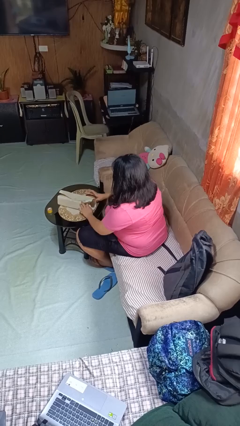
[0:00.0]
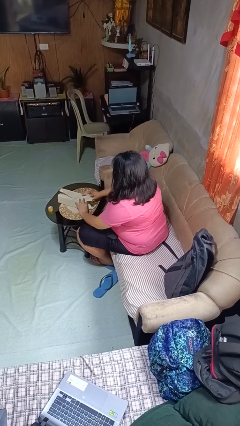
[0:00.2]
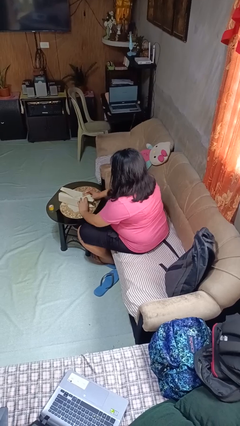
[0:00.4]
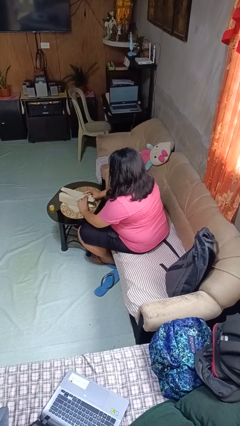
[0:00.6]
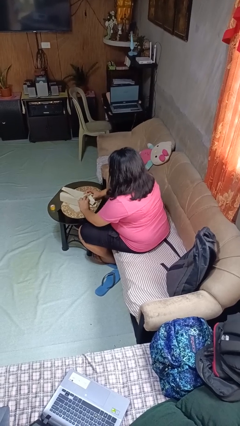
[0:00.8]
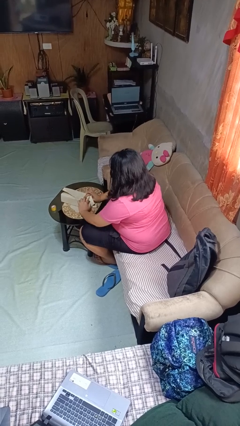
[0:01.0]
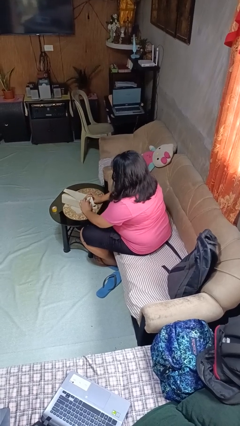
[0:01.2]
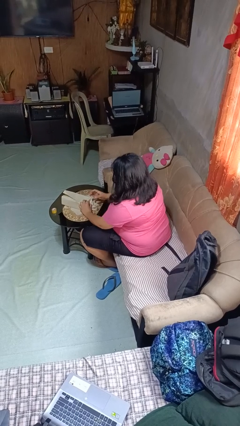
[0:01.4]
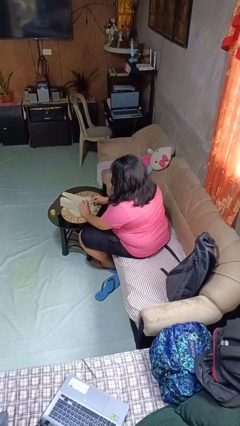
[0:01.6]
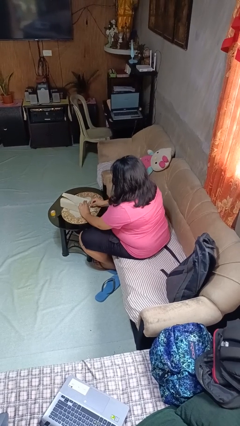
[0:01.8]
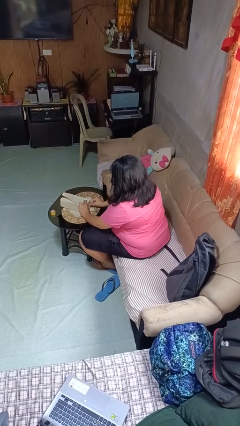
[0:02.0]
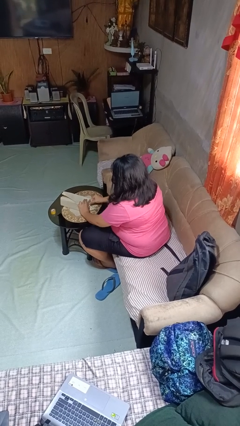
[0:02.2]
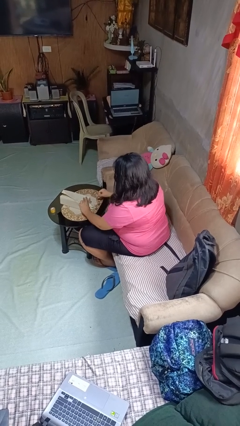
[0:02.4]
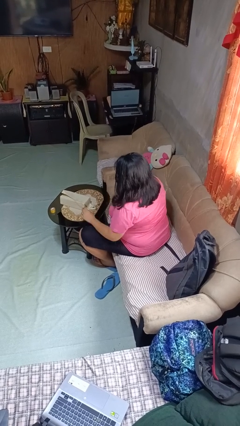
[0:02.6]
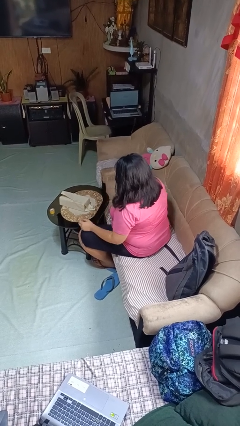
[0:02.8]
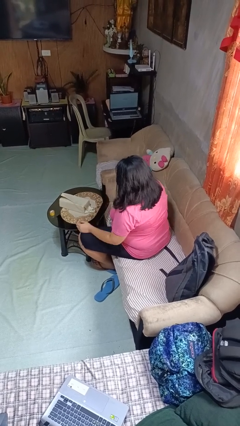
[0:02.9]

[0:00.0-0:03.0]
person wraps box

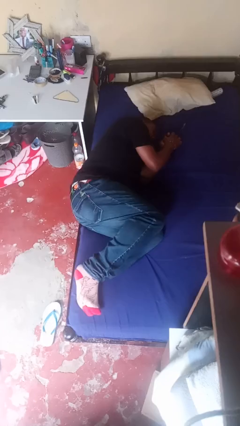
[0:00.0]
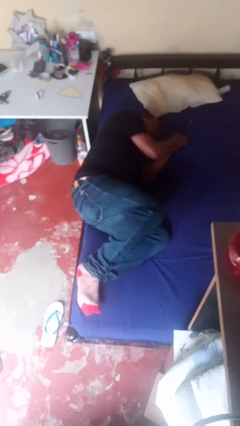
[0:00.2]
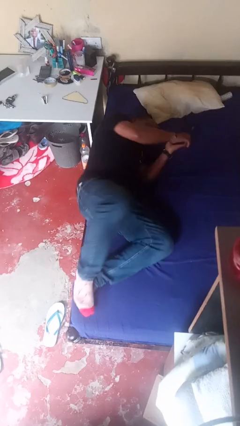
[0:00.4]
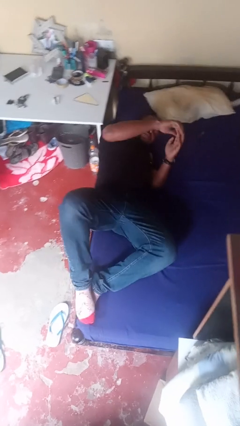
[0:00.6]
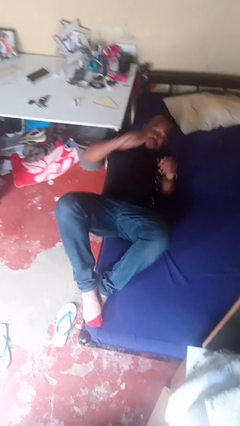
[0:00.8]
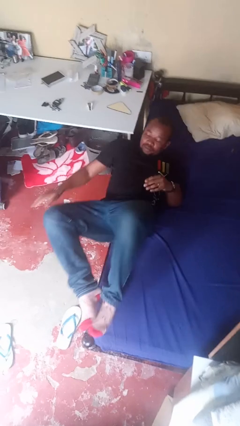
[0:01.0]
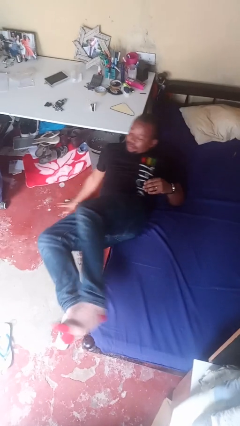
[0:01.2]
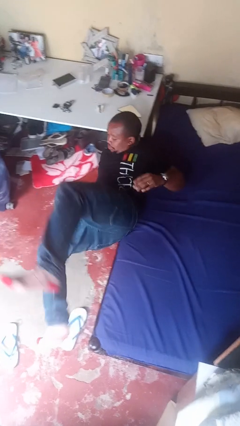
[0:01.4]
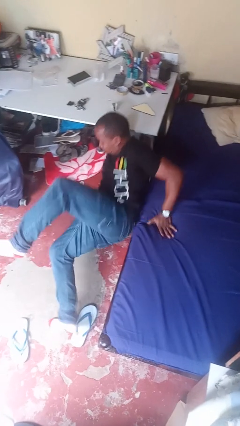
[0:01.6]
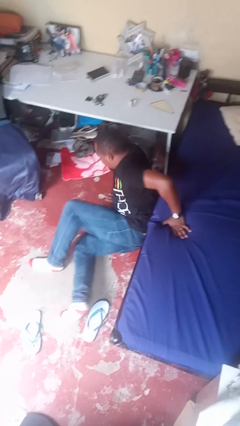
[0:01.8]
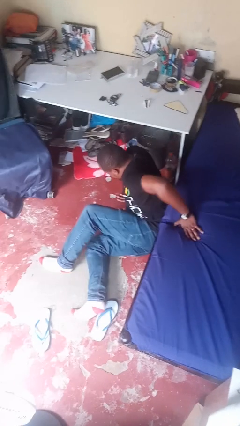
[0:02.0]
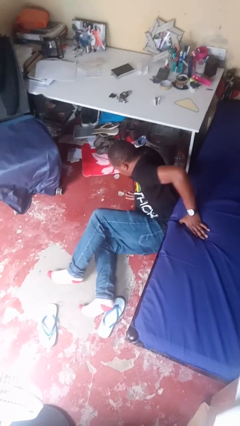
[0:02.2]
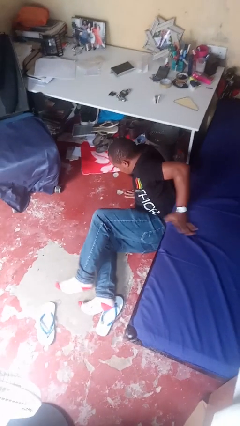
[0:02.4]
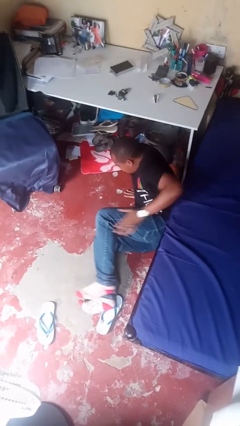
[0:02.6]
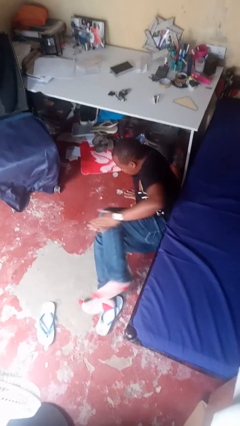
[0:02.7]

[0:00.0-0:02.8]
person falls from bed

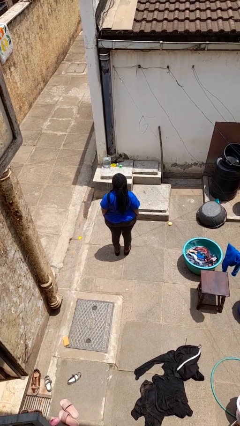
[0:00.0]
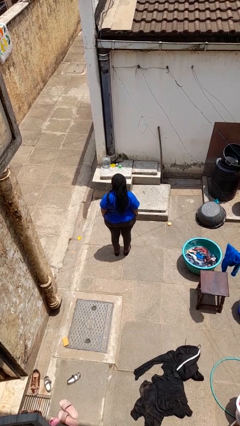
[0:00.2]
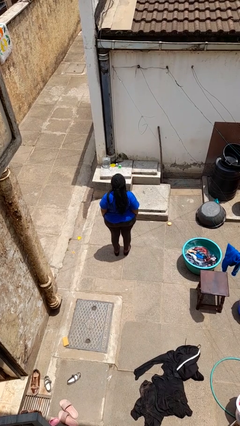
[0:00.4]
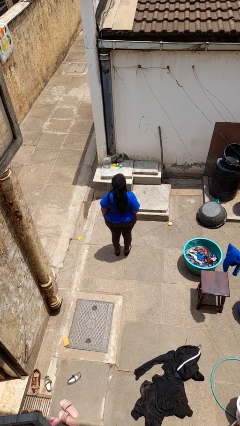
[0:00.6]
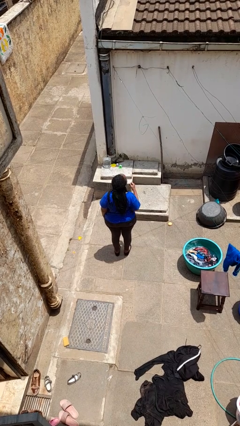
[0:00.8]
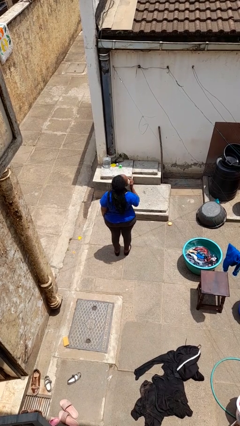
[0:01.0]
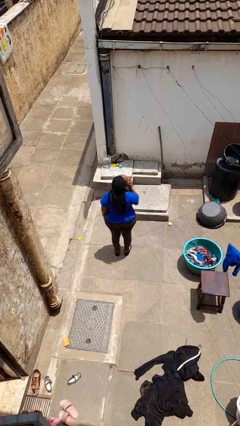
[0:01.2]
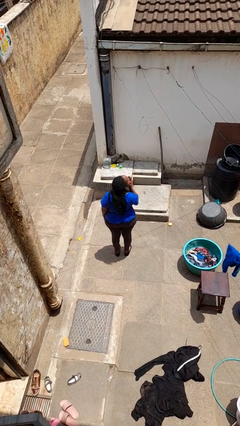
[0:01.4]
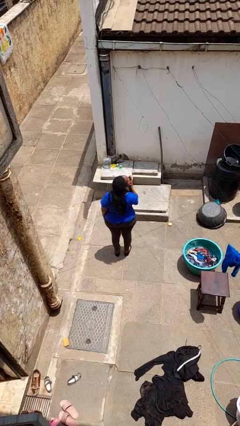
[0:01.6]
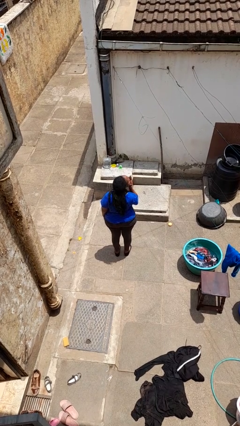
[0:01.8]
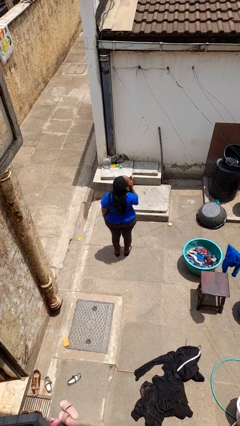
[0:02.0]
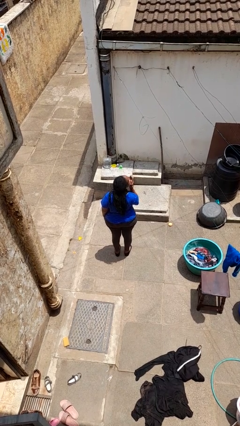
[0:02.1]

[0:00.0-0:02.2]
person yawns

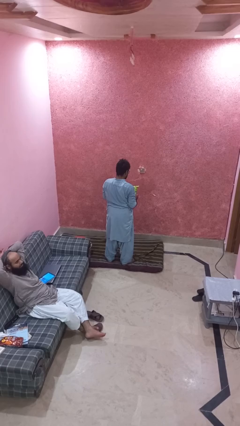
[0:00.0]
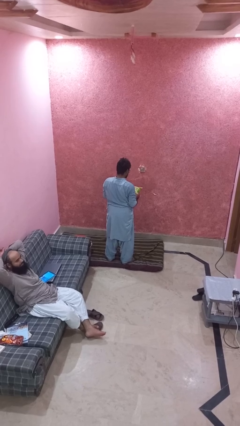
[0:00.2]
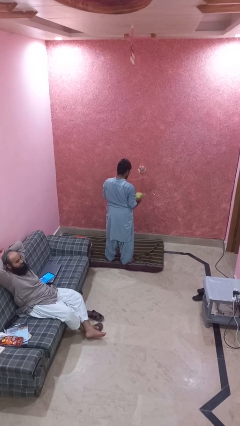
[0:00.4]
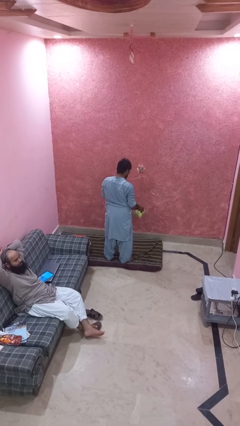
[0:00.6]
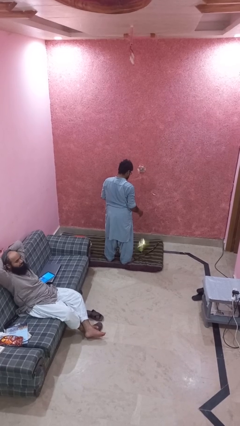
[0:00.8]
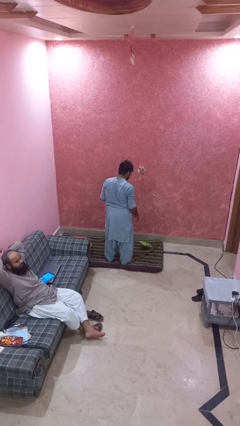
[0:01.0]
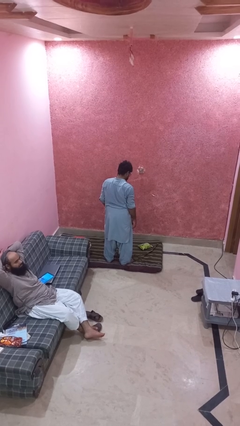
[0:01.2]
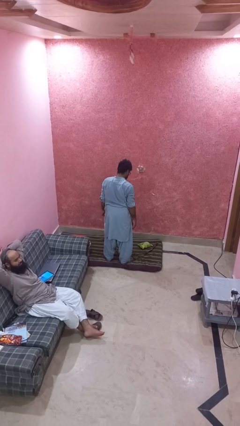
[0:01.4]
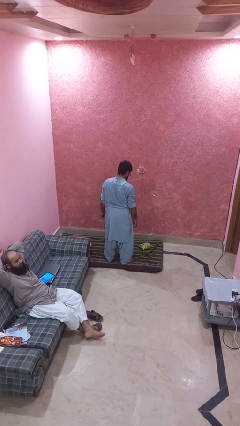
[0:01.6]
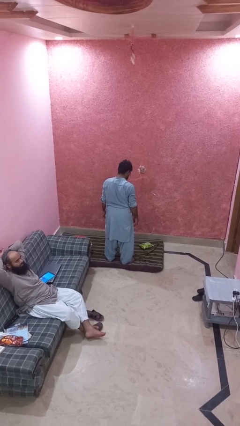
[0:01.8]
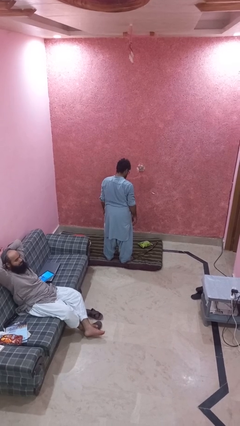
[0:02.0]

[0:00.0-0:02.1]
person drops object

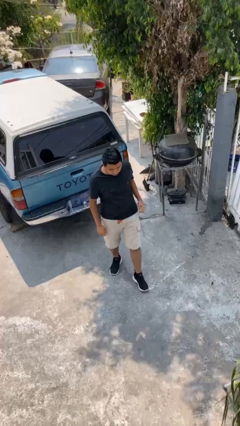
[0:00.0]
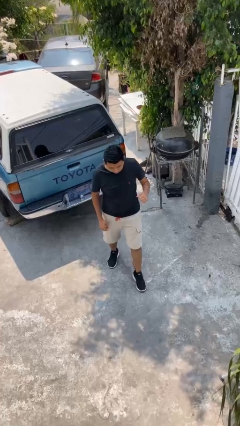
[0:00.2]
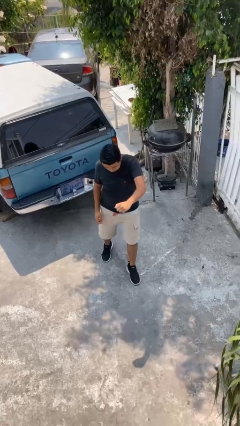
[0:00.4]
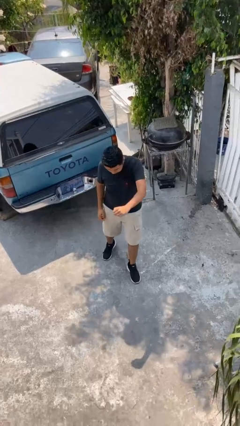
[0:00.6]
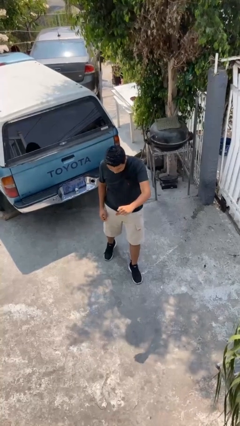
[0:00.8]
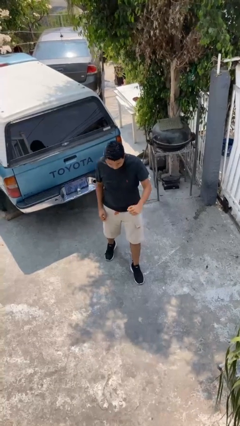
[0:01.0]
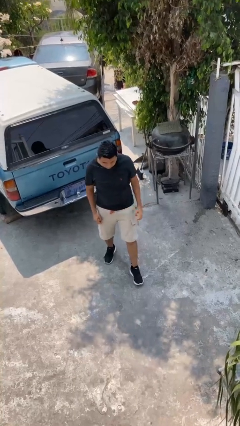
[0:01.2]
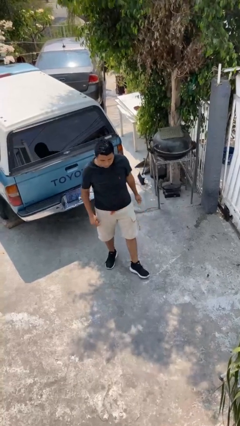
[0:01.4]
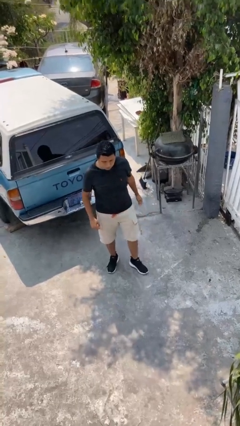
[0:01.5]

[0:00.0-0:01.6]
person punches

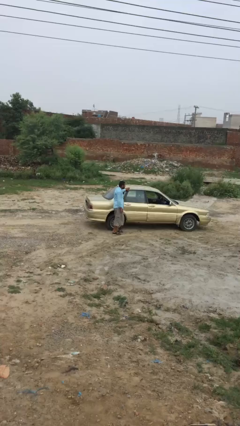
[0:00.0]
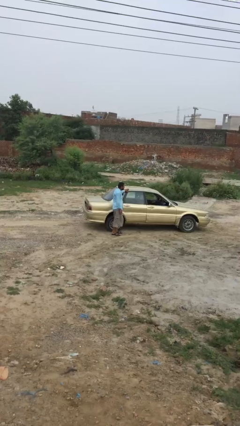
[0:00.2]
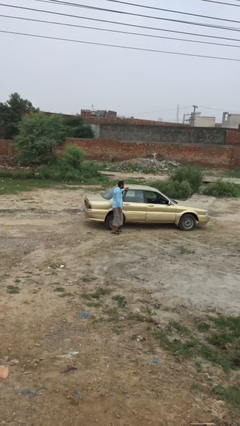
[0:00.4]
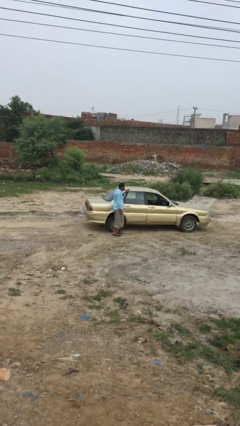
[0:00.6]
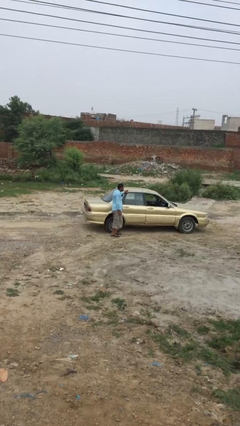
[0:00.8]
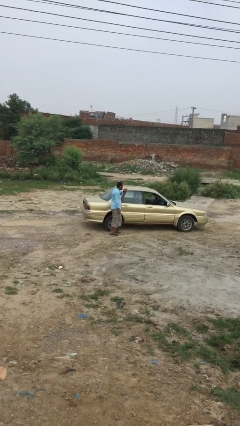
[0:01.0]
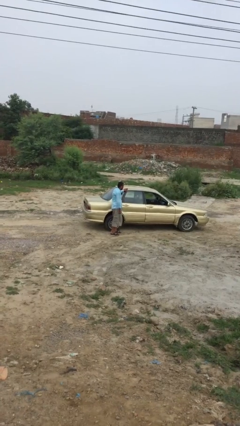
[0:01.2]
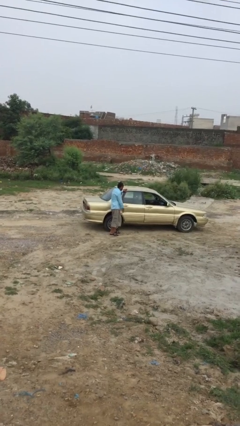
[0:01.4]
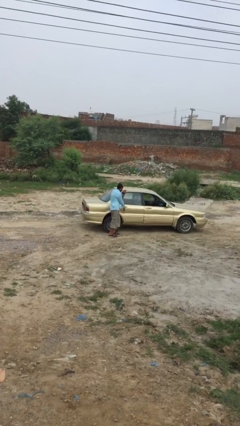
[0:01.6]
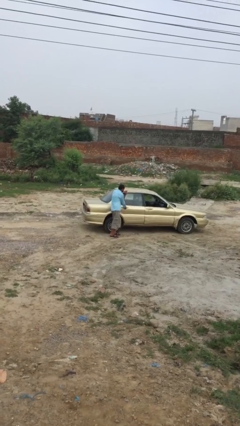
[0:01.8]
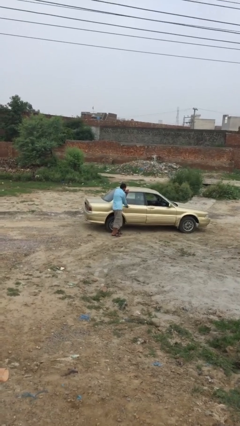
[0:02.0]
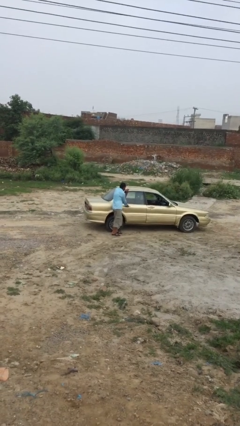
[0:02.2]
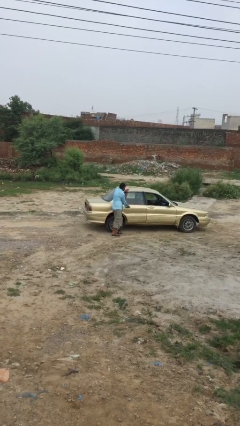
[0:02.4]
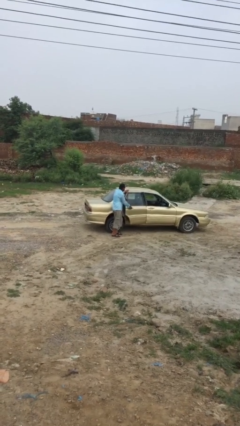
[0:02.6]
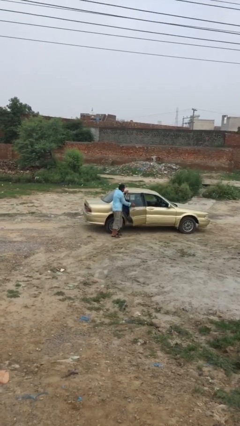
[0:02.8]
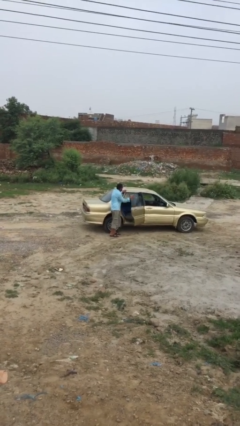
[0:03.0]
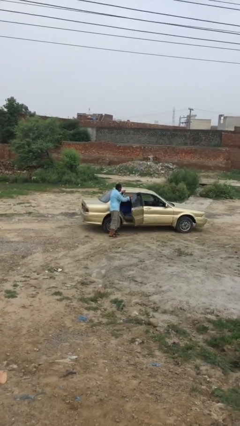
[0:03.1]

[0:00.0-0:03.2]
person opens car door

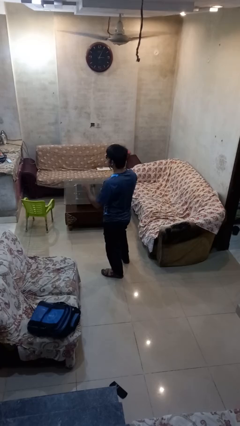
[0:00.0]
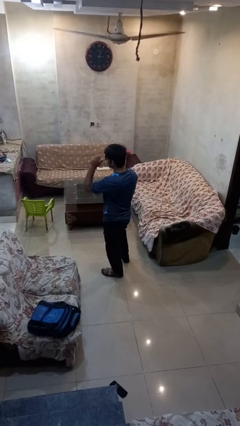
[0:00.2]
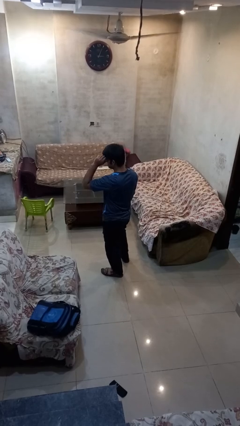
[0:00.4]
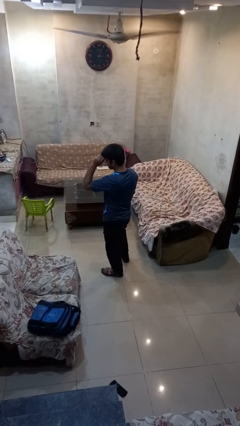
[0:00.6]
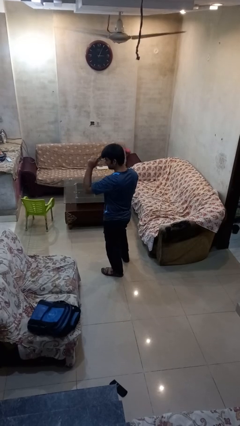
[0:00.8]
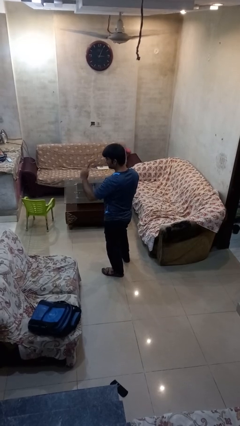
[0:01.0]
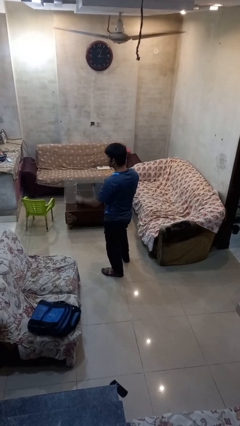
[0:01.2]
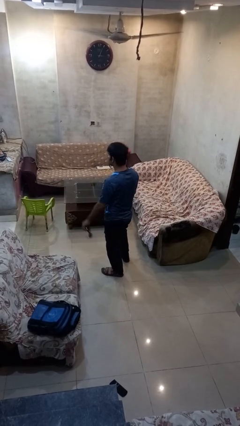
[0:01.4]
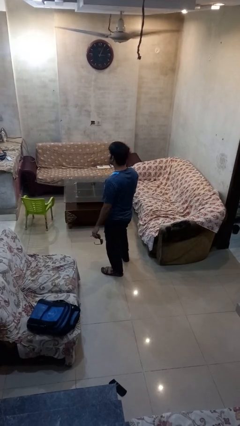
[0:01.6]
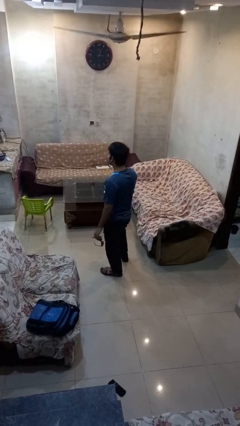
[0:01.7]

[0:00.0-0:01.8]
person takes off sunglasses

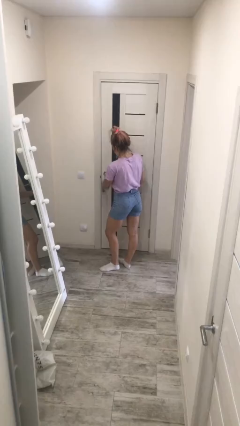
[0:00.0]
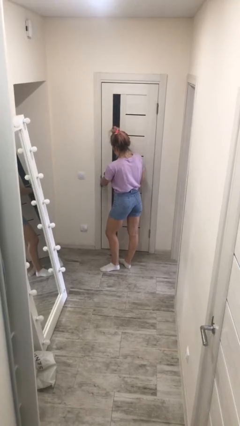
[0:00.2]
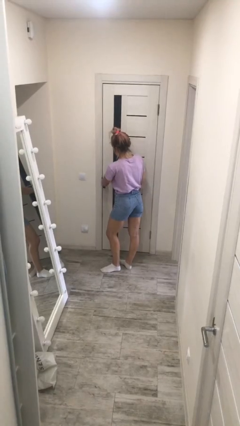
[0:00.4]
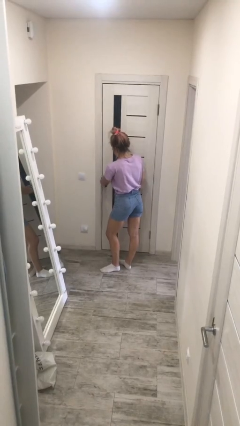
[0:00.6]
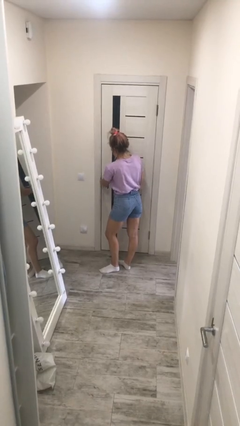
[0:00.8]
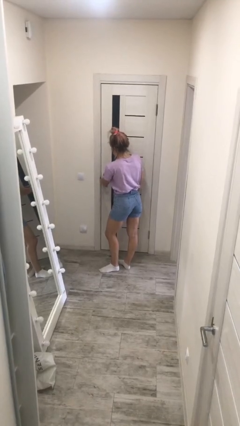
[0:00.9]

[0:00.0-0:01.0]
person locks door with keys
